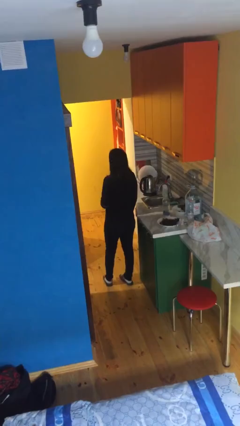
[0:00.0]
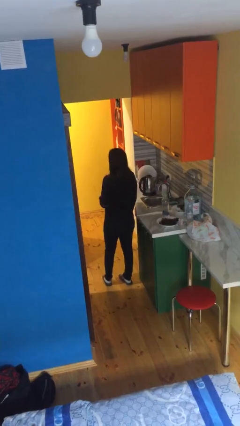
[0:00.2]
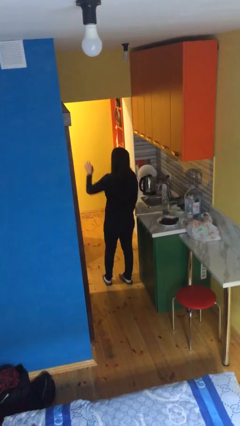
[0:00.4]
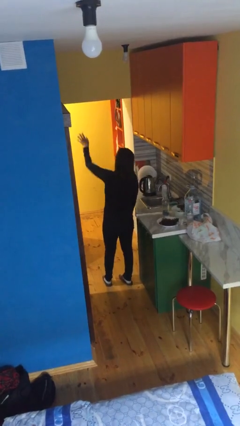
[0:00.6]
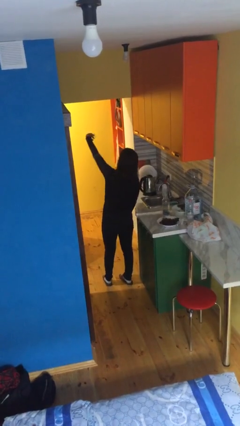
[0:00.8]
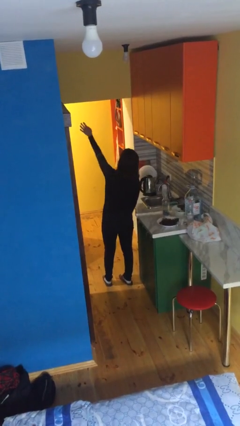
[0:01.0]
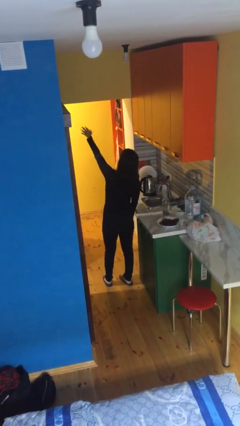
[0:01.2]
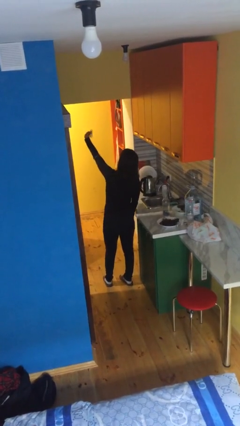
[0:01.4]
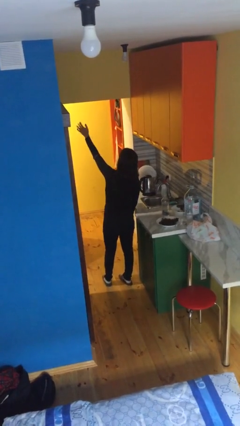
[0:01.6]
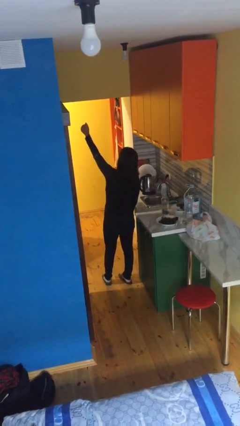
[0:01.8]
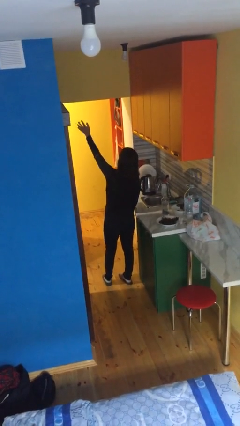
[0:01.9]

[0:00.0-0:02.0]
person gestures come here

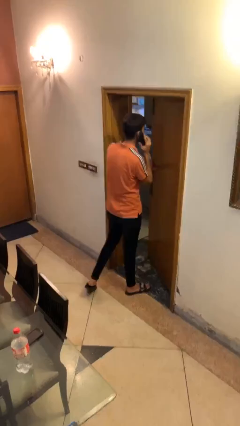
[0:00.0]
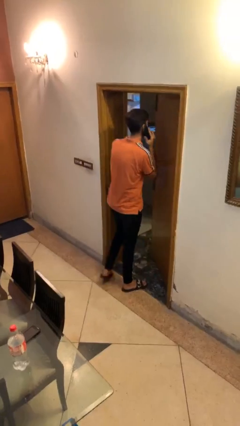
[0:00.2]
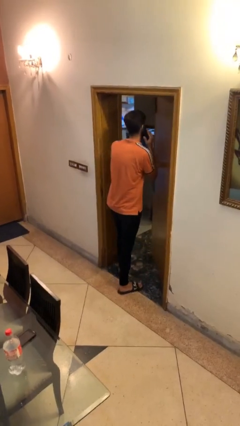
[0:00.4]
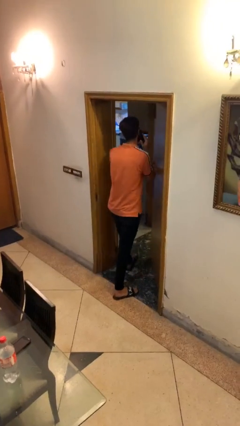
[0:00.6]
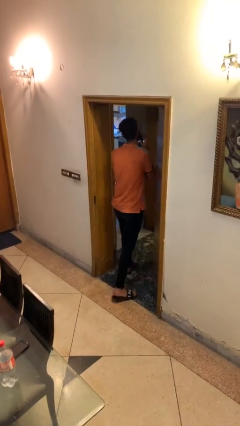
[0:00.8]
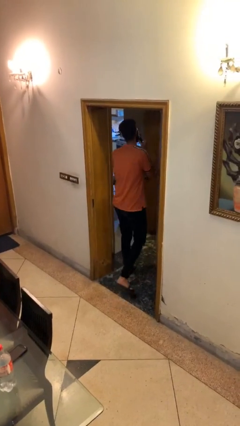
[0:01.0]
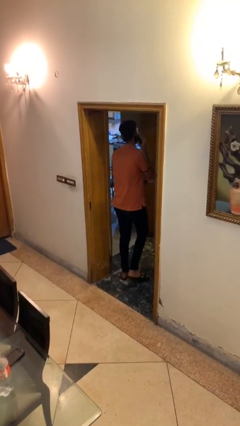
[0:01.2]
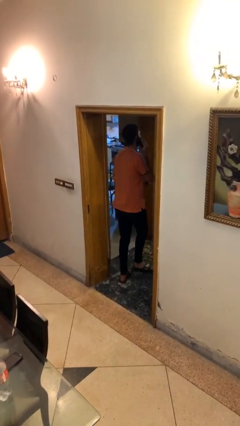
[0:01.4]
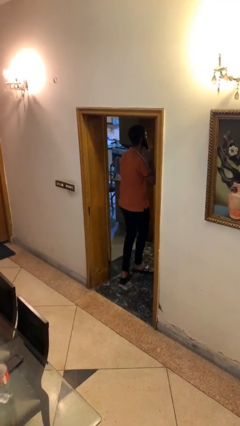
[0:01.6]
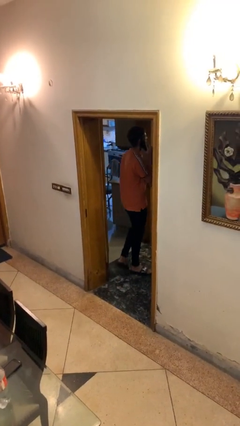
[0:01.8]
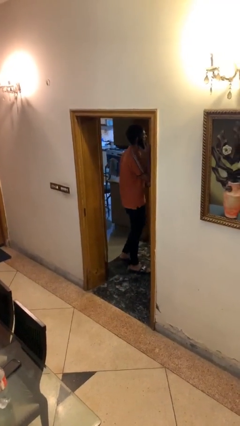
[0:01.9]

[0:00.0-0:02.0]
person exits scene through structure

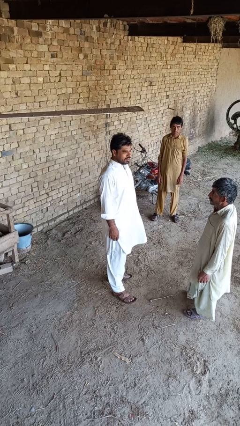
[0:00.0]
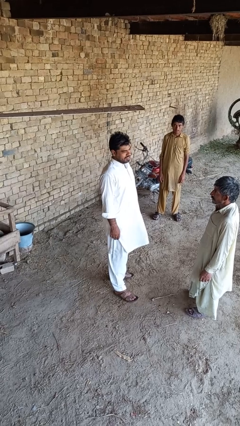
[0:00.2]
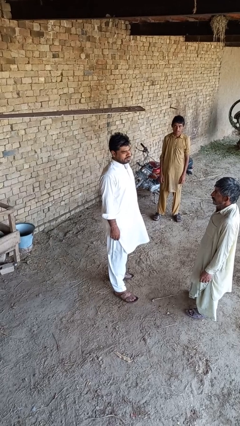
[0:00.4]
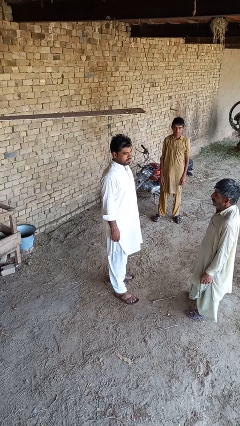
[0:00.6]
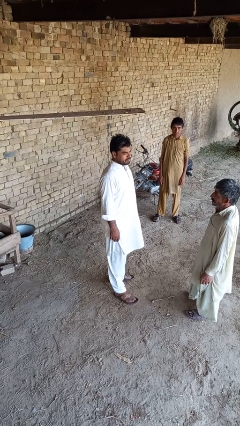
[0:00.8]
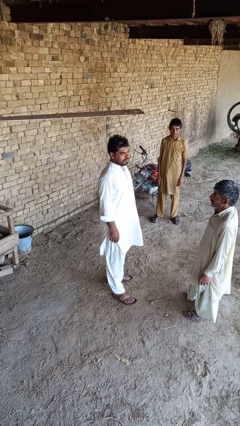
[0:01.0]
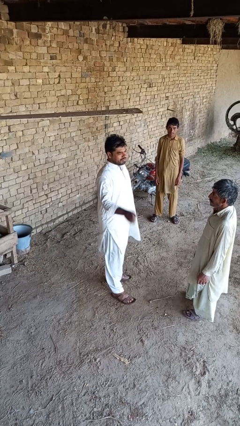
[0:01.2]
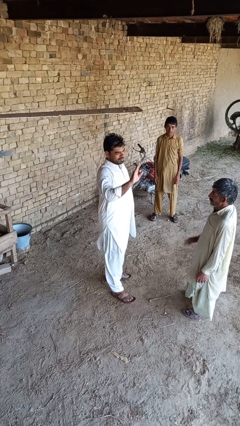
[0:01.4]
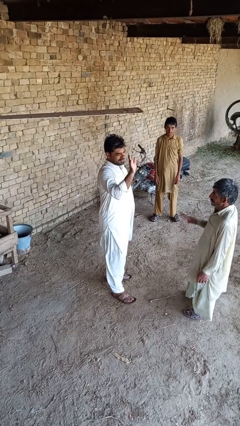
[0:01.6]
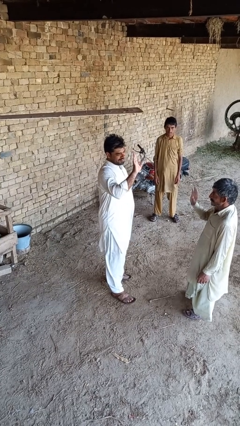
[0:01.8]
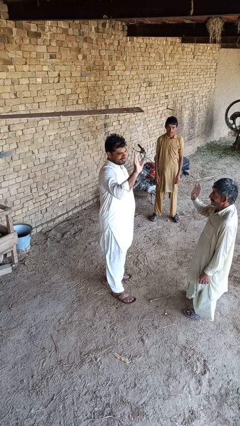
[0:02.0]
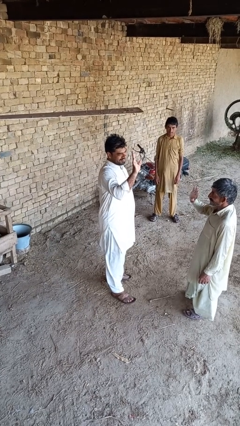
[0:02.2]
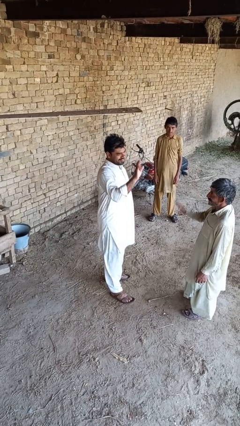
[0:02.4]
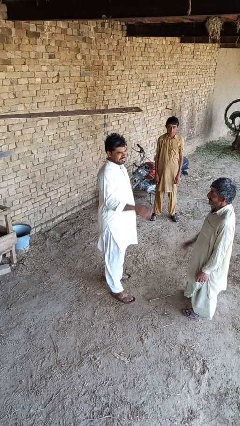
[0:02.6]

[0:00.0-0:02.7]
person waves at person

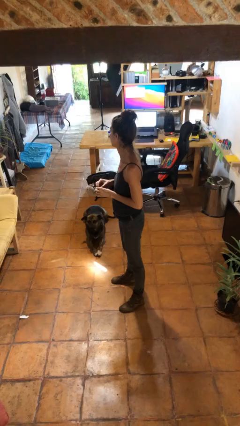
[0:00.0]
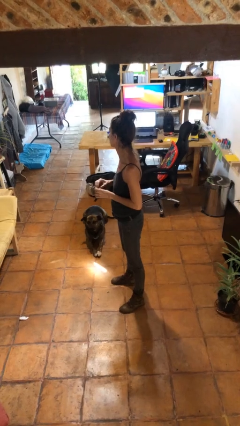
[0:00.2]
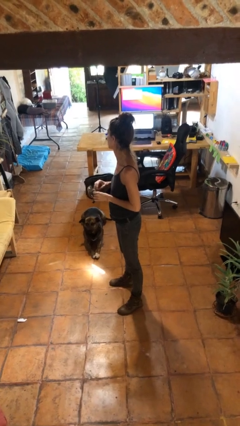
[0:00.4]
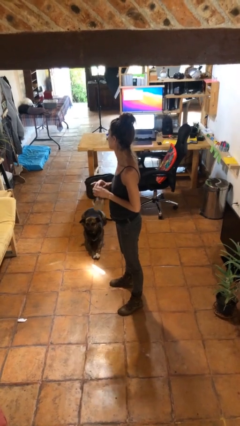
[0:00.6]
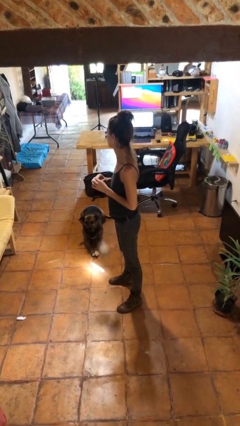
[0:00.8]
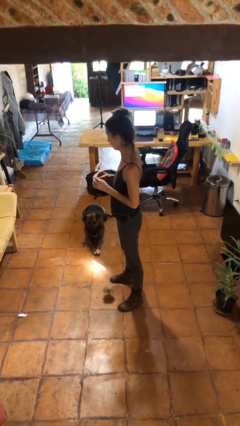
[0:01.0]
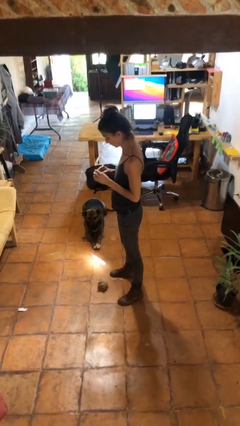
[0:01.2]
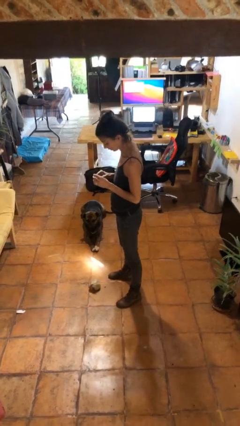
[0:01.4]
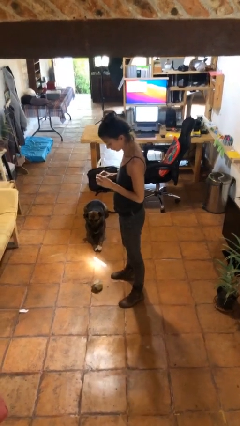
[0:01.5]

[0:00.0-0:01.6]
person drops object

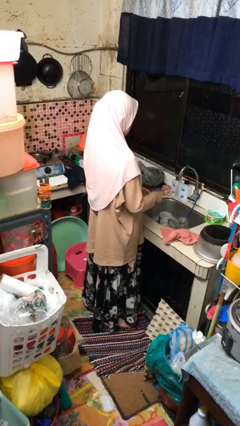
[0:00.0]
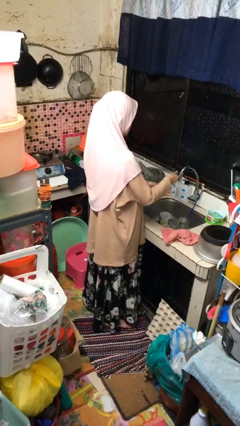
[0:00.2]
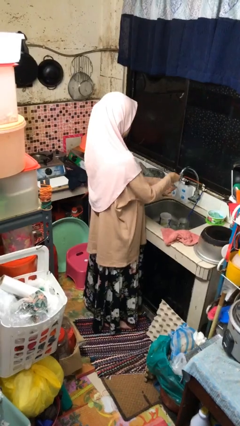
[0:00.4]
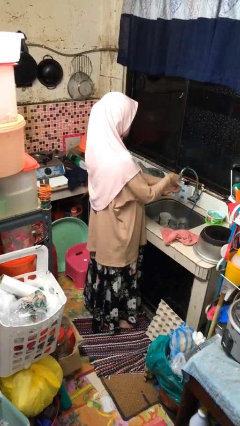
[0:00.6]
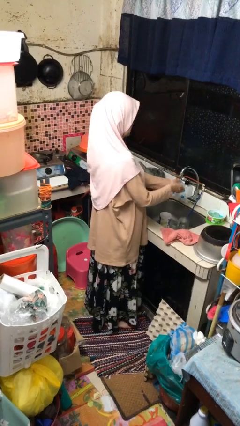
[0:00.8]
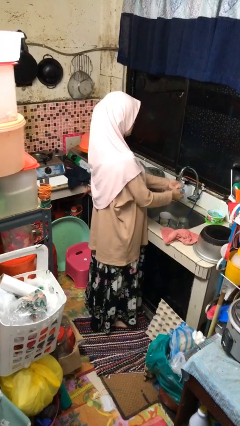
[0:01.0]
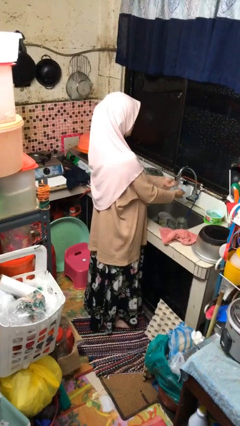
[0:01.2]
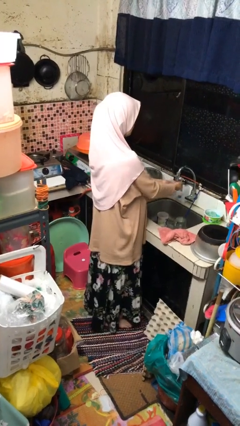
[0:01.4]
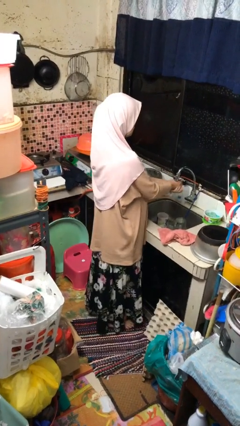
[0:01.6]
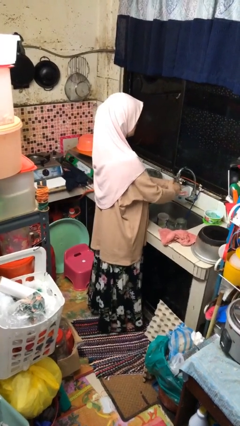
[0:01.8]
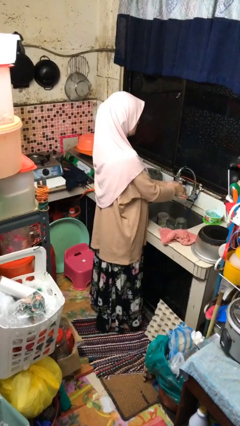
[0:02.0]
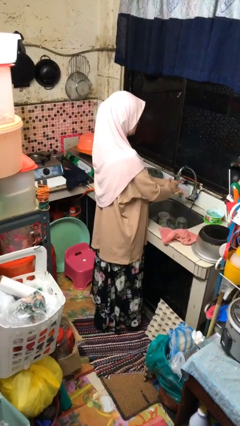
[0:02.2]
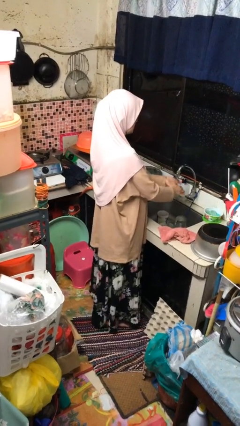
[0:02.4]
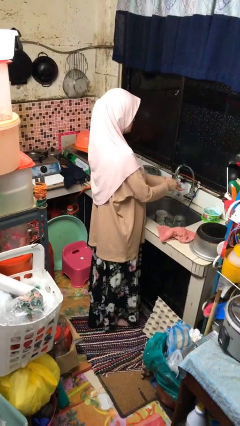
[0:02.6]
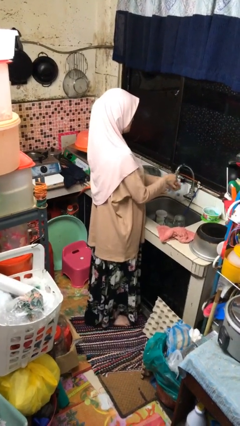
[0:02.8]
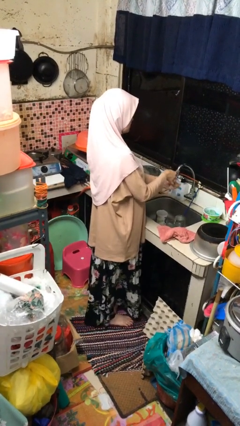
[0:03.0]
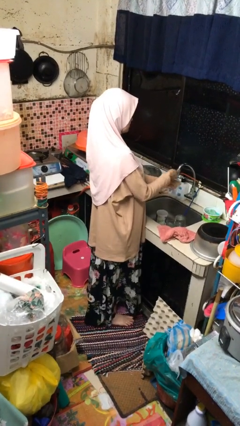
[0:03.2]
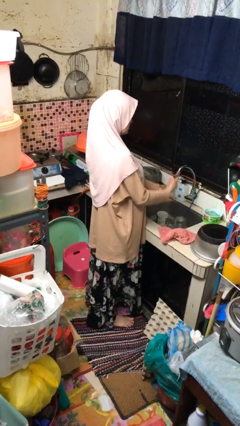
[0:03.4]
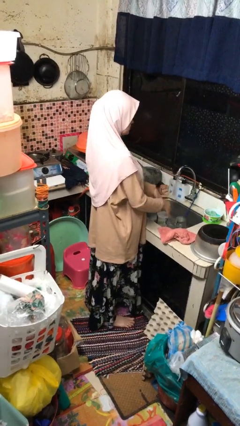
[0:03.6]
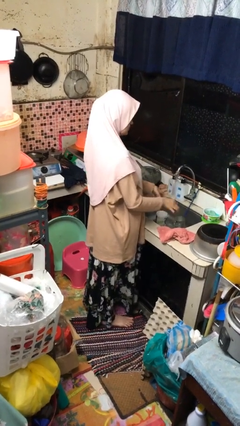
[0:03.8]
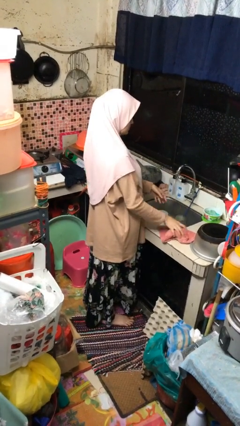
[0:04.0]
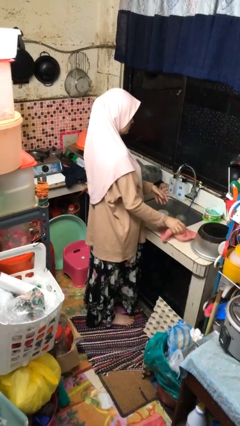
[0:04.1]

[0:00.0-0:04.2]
person washes hands

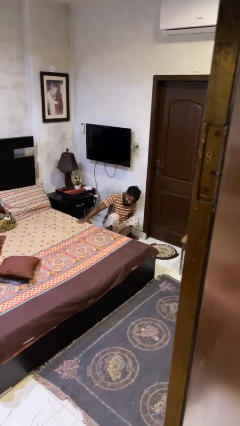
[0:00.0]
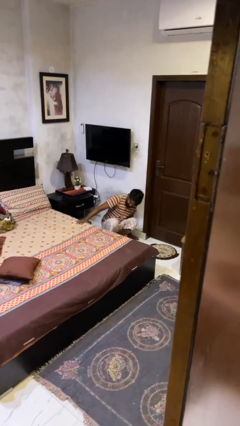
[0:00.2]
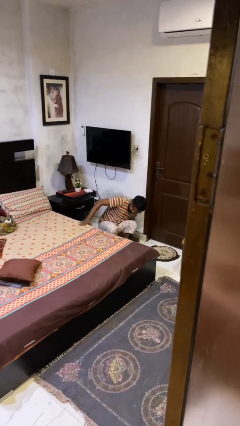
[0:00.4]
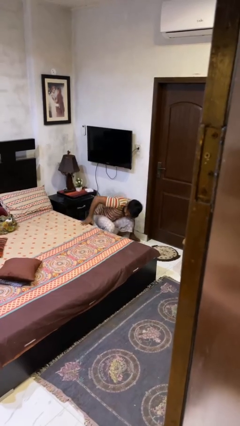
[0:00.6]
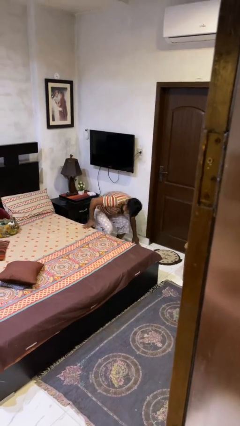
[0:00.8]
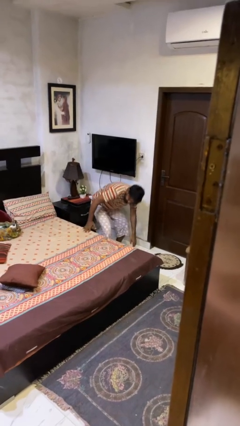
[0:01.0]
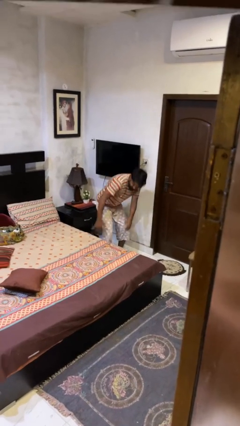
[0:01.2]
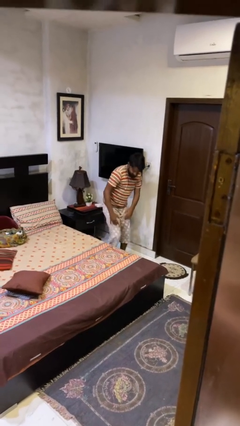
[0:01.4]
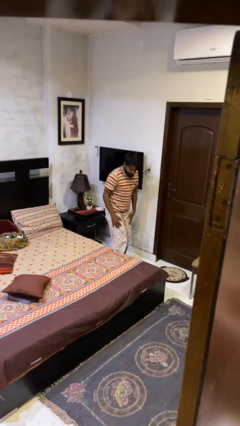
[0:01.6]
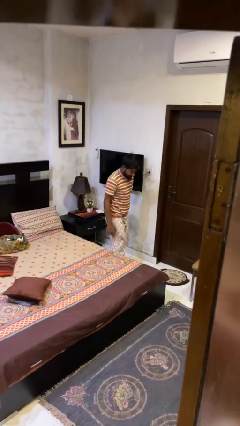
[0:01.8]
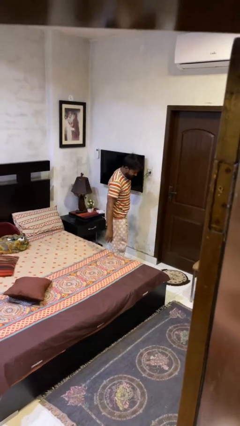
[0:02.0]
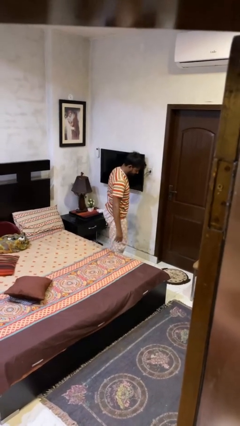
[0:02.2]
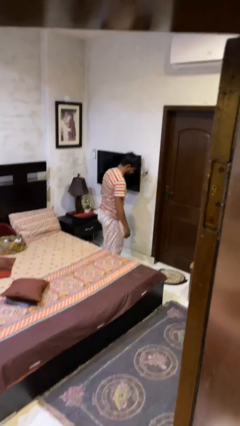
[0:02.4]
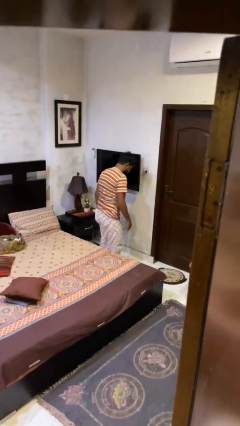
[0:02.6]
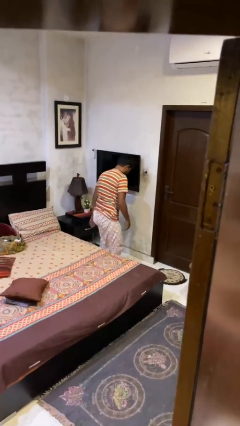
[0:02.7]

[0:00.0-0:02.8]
person stands up from floor

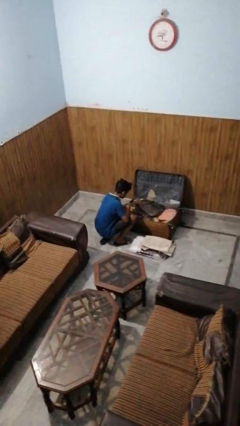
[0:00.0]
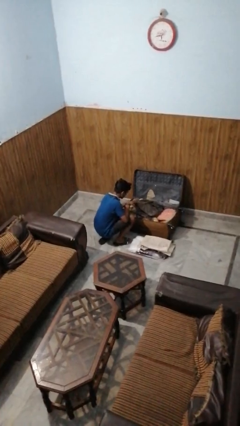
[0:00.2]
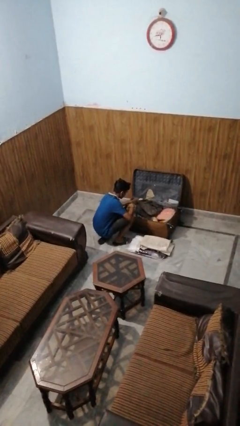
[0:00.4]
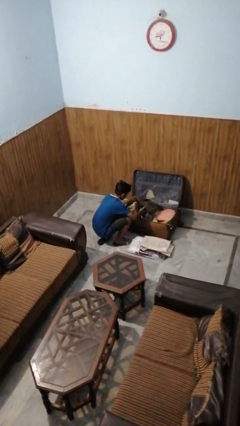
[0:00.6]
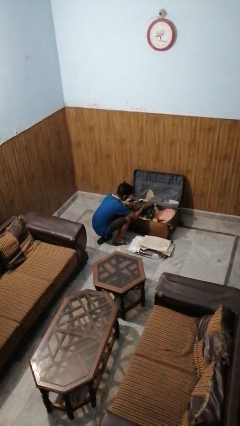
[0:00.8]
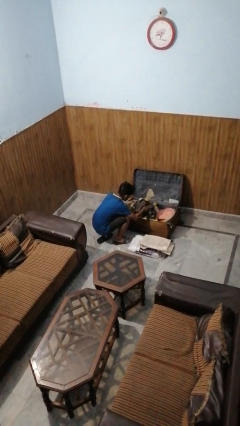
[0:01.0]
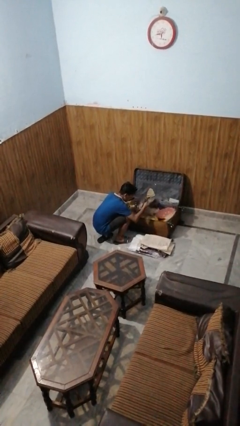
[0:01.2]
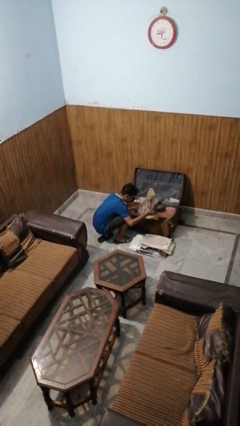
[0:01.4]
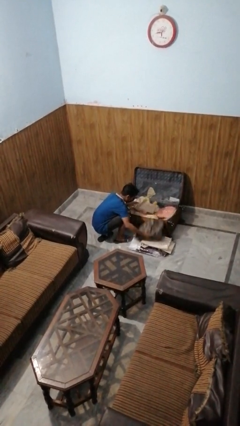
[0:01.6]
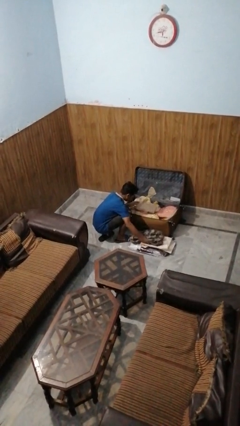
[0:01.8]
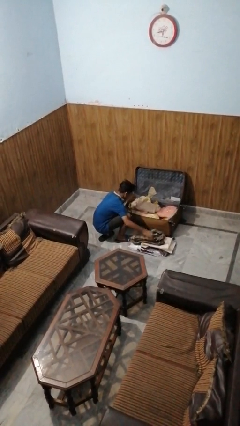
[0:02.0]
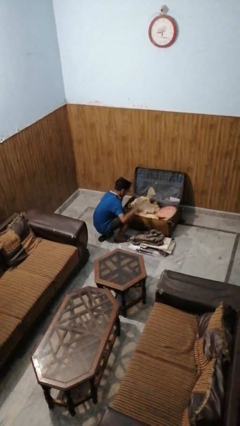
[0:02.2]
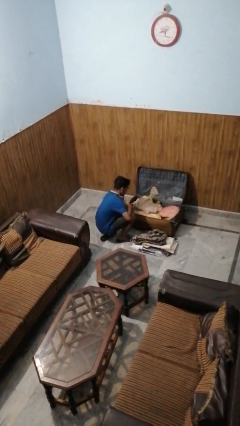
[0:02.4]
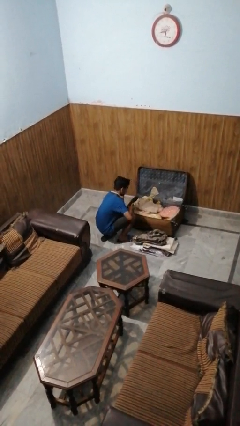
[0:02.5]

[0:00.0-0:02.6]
person unloads clothes from suitcase
